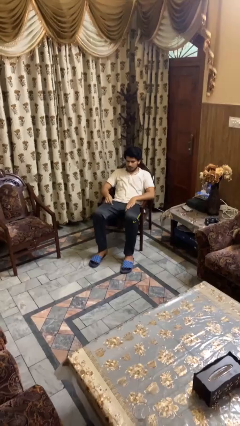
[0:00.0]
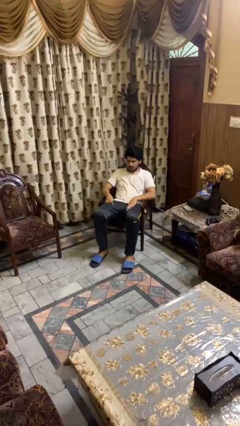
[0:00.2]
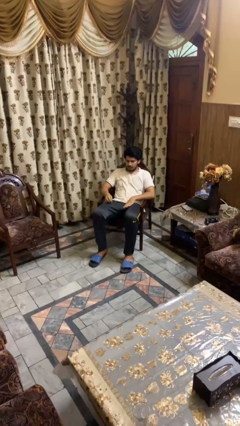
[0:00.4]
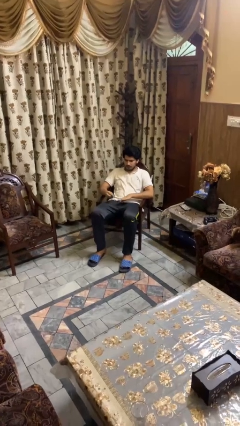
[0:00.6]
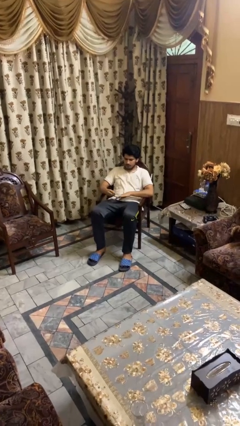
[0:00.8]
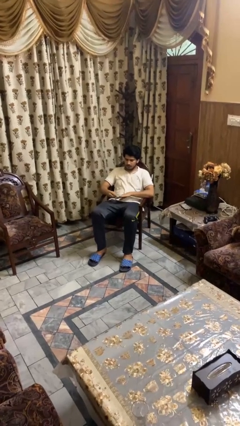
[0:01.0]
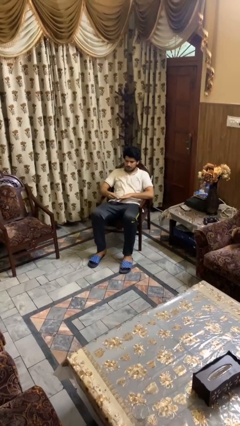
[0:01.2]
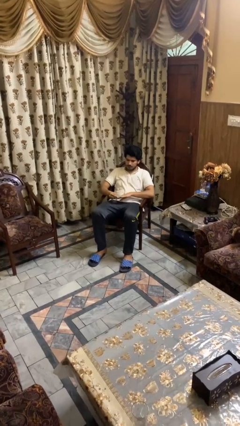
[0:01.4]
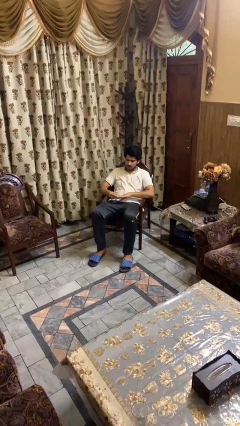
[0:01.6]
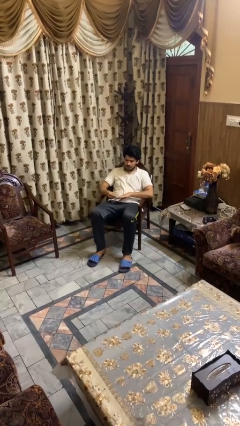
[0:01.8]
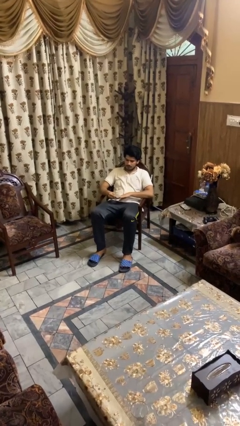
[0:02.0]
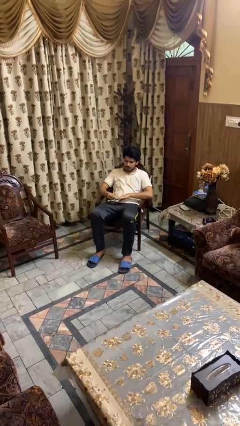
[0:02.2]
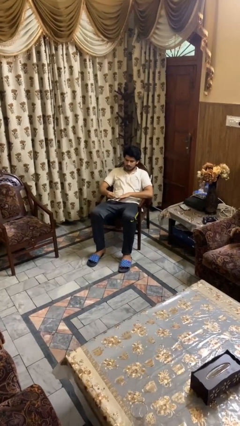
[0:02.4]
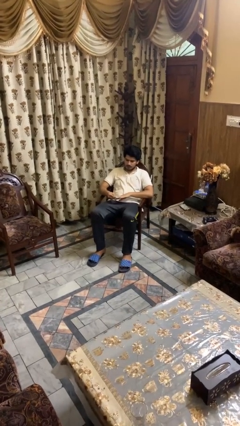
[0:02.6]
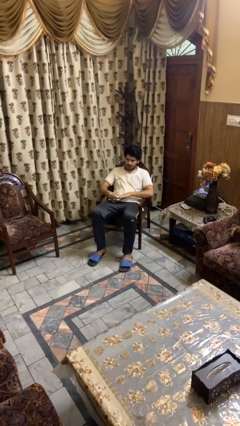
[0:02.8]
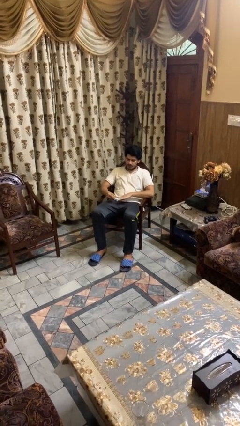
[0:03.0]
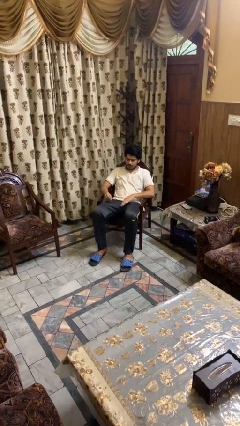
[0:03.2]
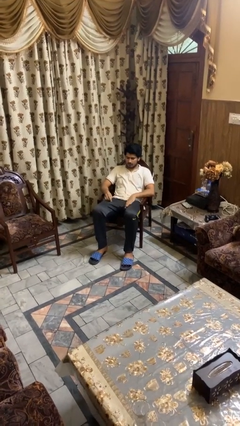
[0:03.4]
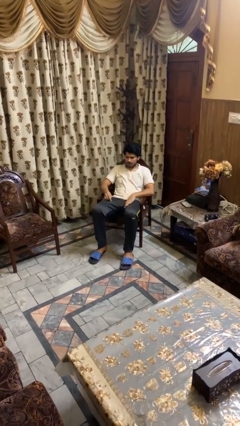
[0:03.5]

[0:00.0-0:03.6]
person files fingernails

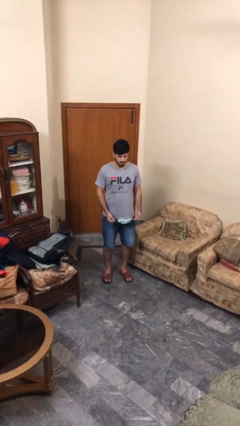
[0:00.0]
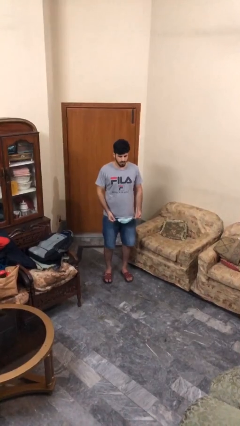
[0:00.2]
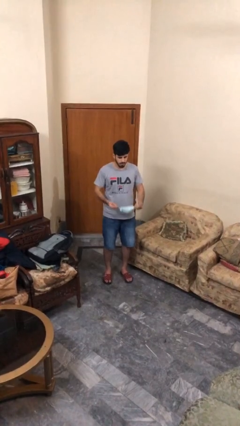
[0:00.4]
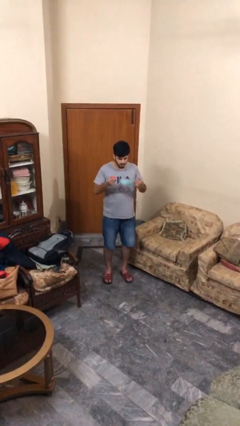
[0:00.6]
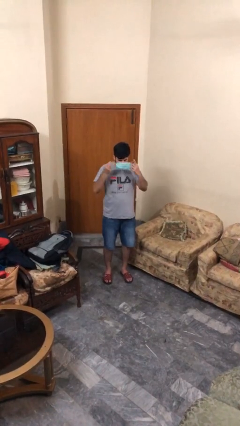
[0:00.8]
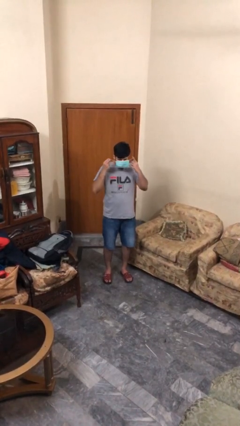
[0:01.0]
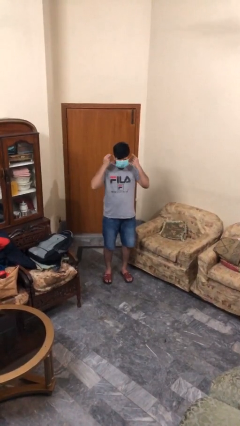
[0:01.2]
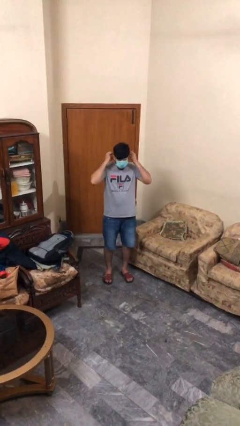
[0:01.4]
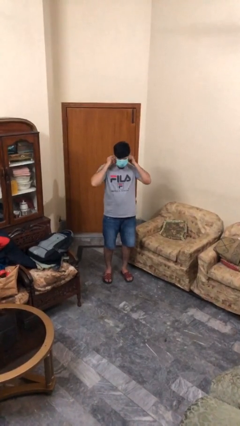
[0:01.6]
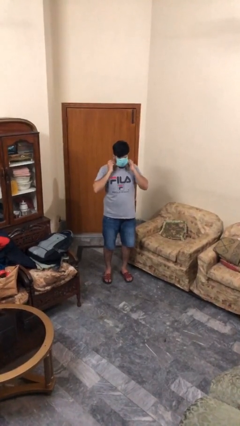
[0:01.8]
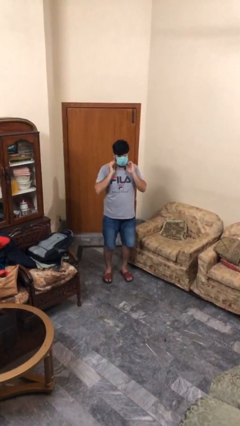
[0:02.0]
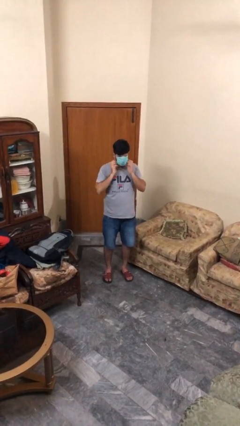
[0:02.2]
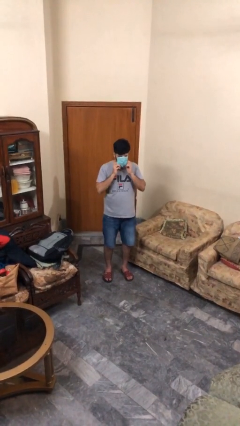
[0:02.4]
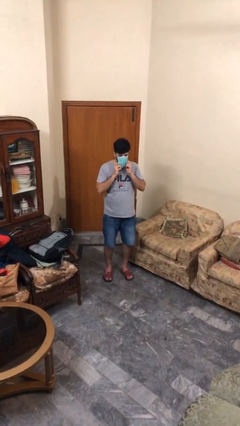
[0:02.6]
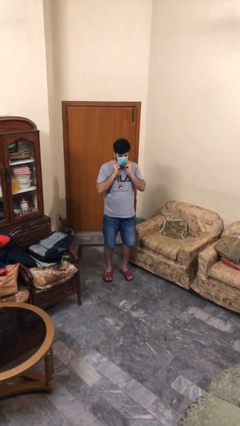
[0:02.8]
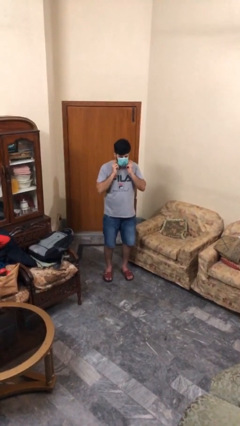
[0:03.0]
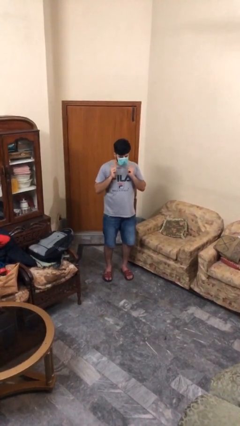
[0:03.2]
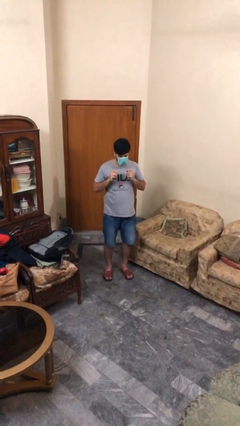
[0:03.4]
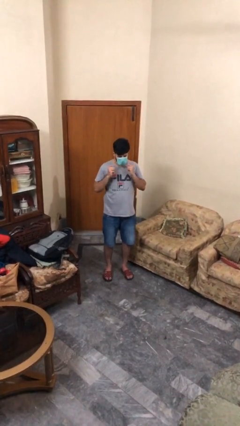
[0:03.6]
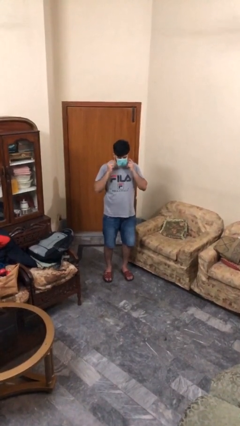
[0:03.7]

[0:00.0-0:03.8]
person puts on facemask

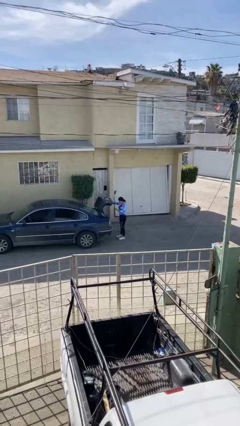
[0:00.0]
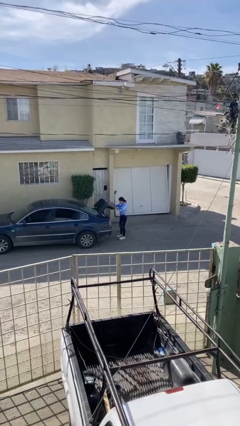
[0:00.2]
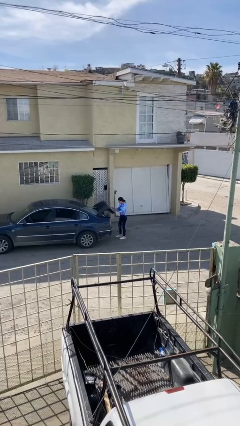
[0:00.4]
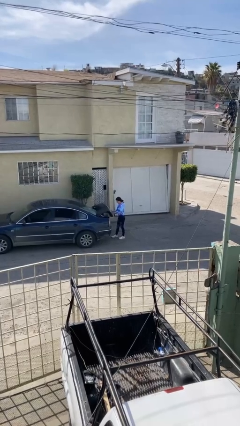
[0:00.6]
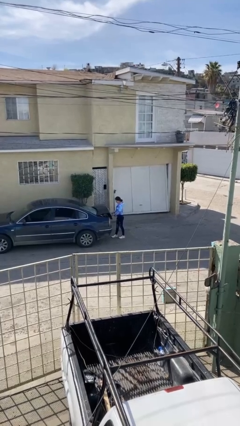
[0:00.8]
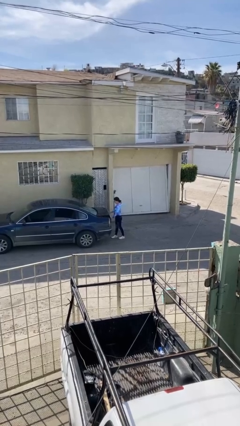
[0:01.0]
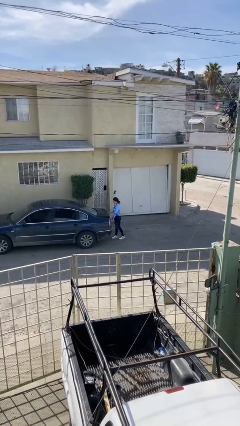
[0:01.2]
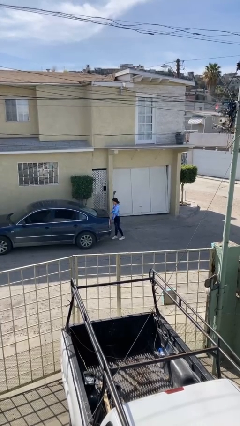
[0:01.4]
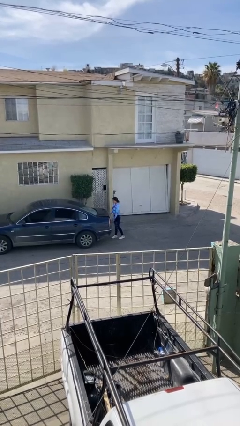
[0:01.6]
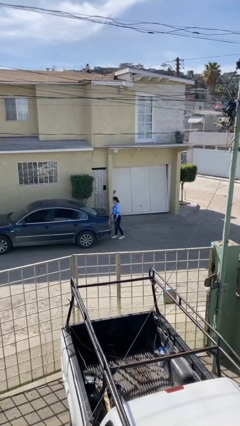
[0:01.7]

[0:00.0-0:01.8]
person closes car trunk

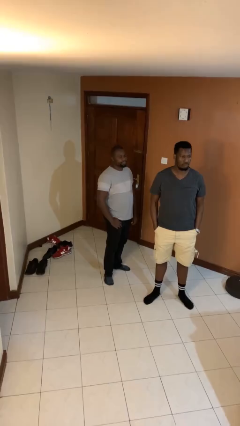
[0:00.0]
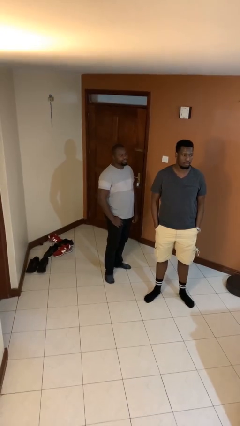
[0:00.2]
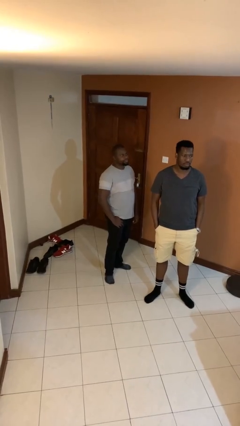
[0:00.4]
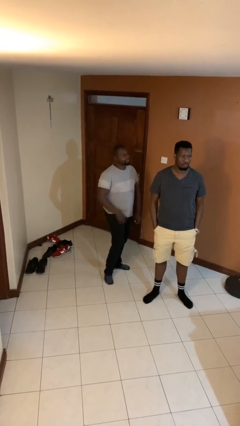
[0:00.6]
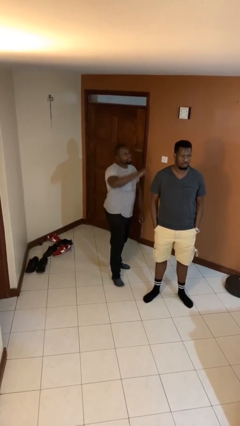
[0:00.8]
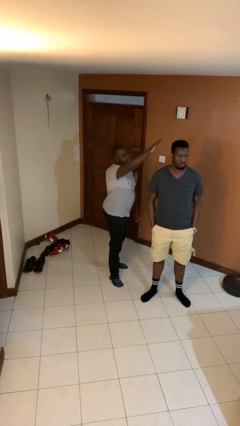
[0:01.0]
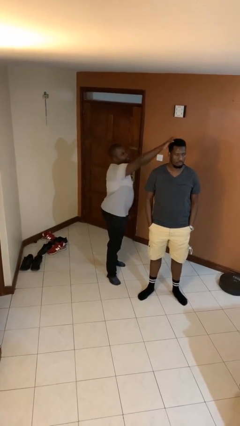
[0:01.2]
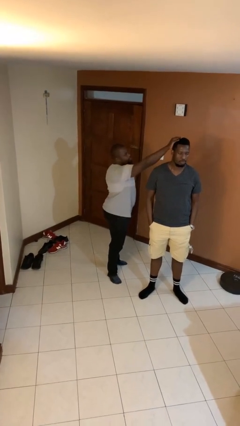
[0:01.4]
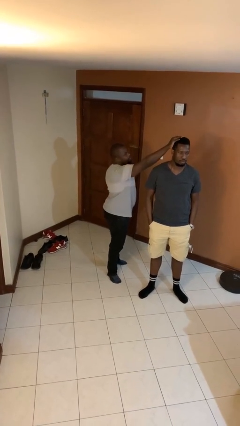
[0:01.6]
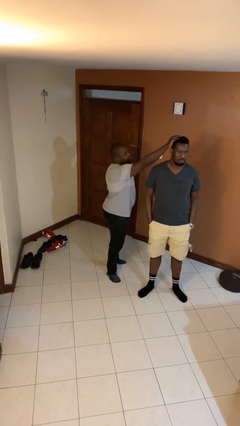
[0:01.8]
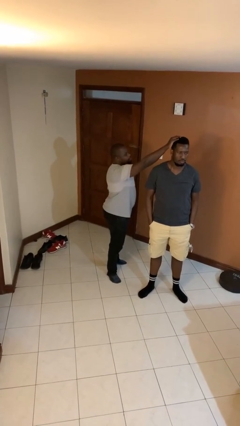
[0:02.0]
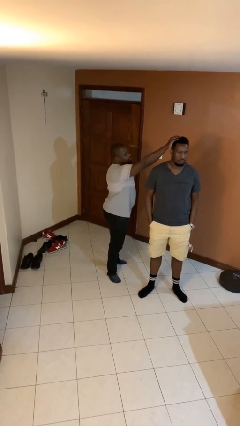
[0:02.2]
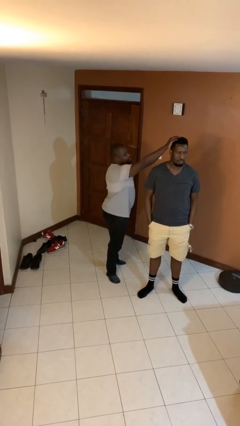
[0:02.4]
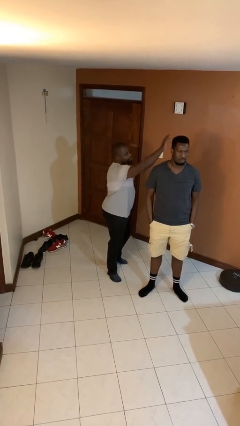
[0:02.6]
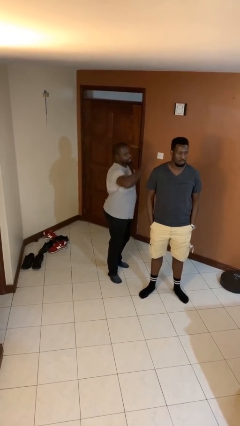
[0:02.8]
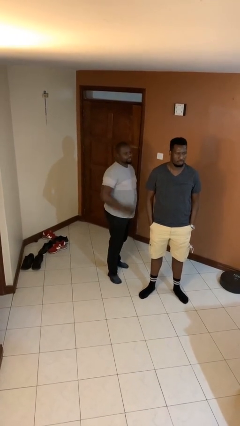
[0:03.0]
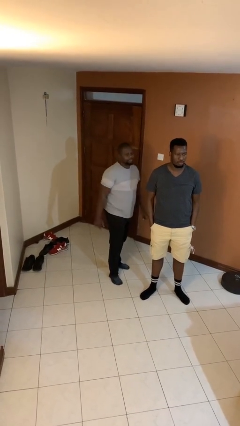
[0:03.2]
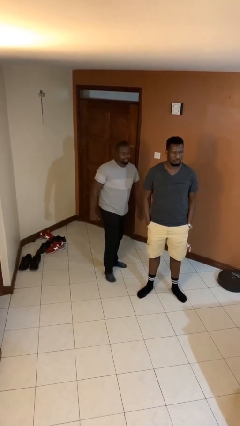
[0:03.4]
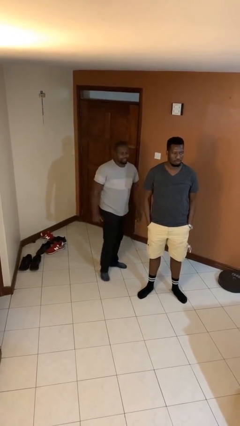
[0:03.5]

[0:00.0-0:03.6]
person grabs person by hair

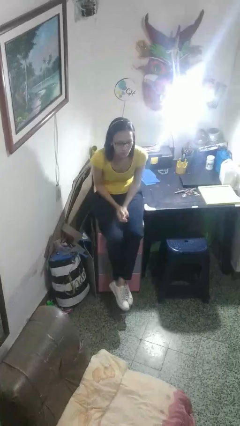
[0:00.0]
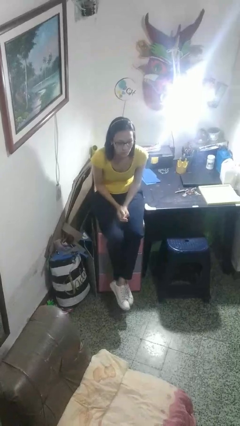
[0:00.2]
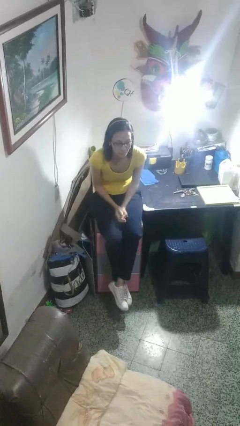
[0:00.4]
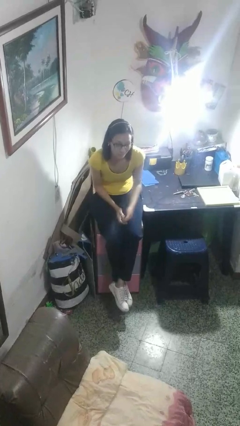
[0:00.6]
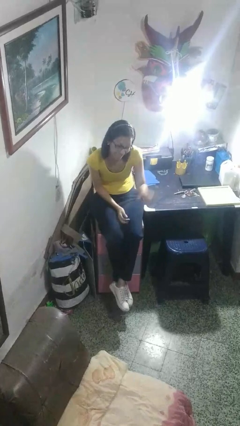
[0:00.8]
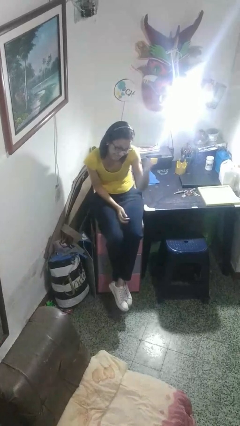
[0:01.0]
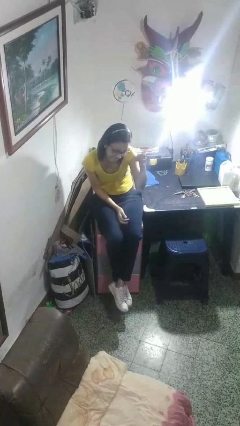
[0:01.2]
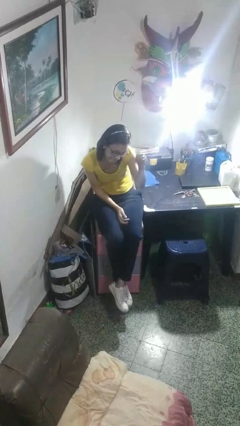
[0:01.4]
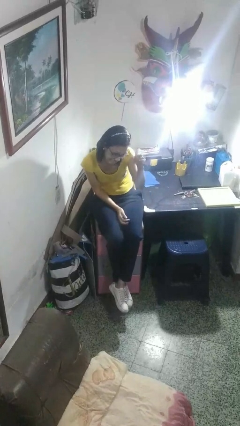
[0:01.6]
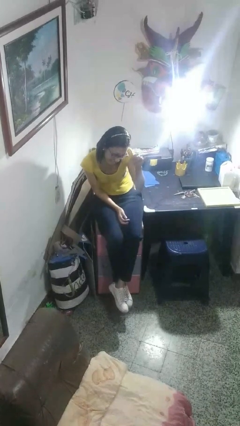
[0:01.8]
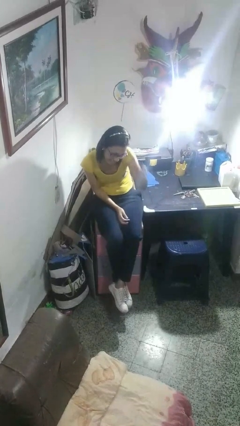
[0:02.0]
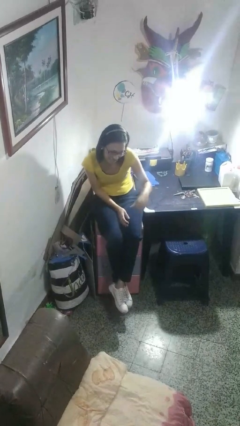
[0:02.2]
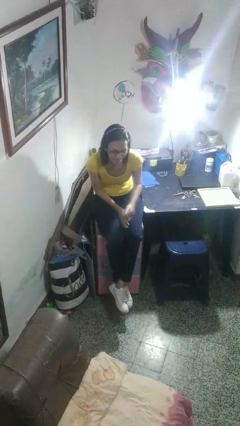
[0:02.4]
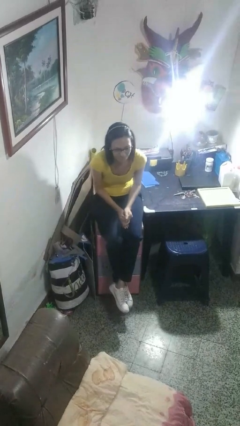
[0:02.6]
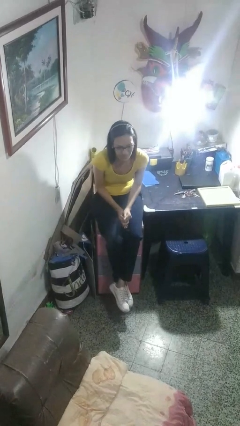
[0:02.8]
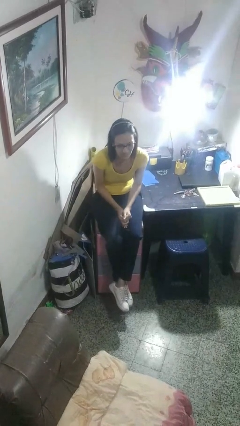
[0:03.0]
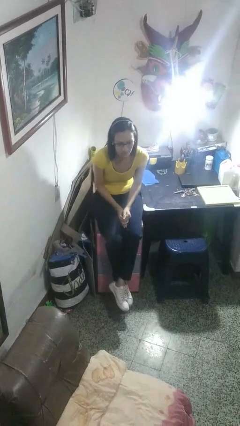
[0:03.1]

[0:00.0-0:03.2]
person gestures hang loose

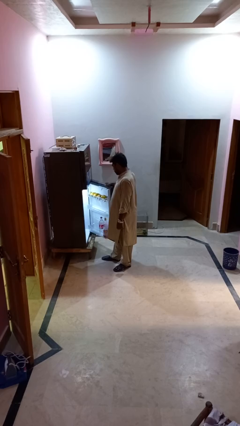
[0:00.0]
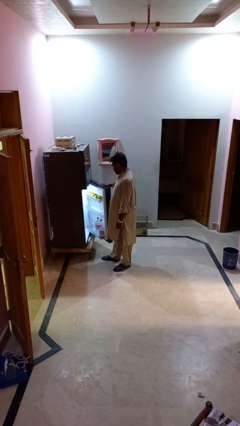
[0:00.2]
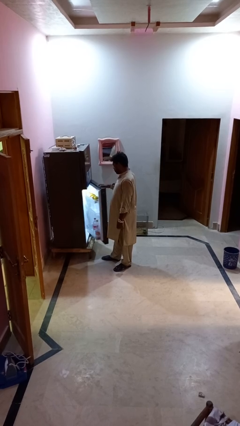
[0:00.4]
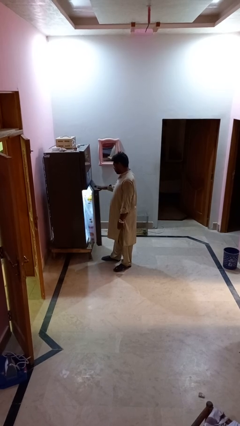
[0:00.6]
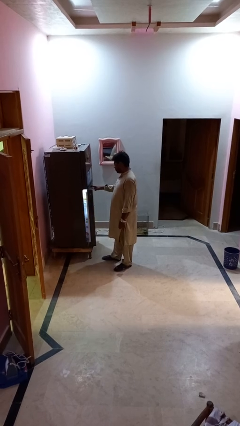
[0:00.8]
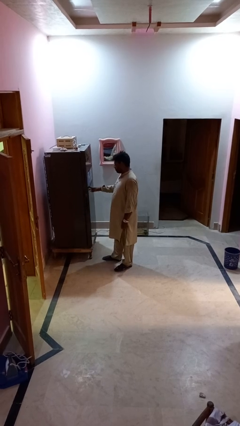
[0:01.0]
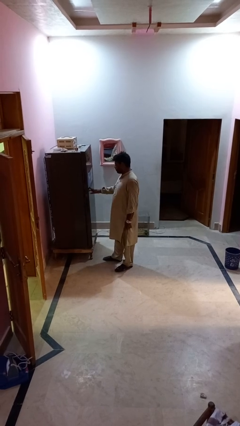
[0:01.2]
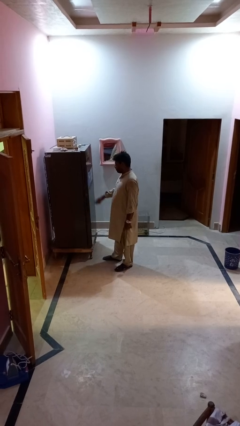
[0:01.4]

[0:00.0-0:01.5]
person closes refrigerator
